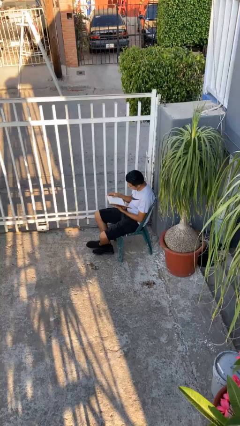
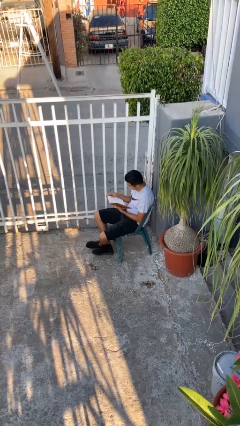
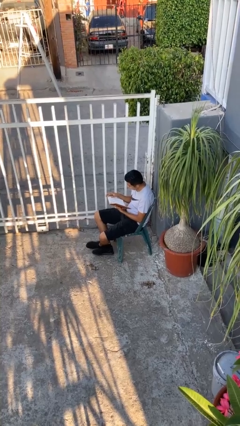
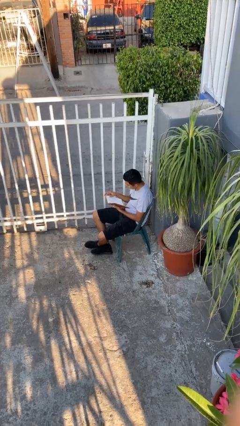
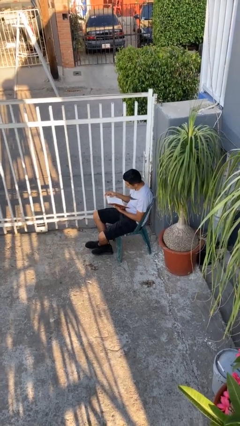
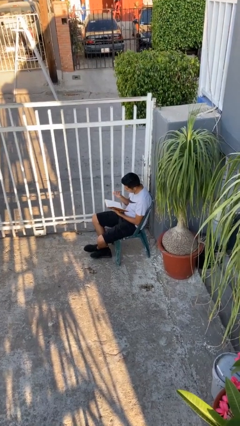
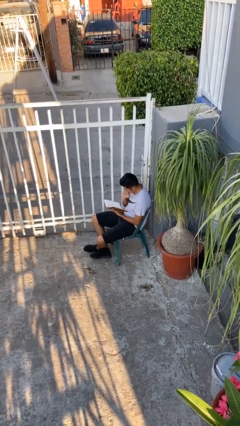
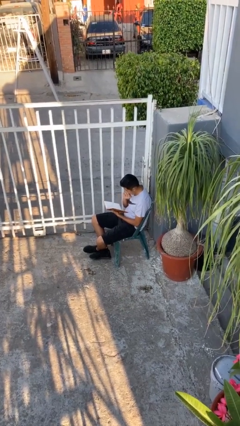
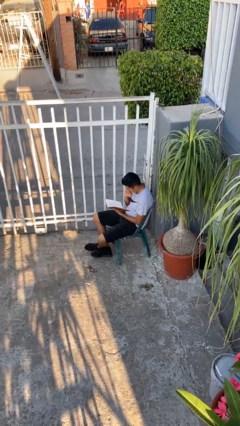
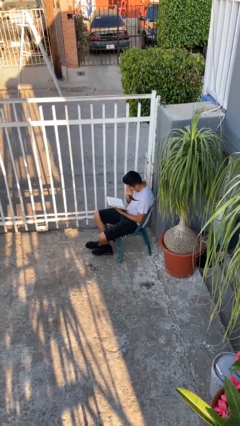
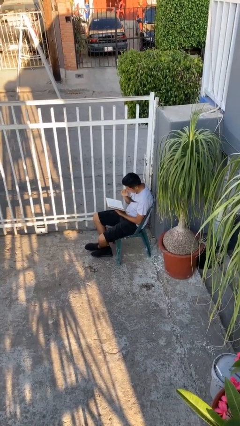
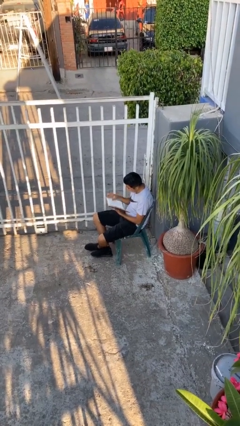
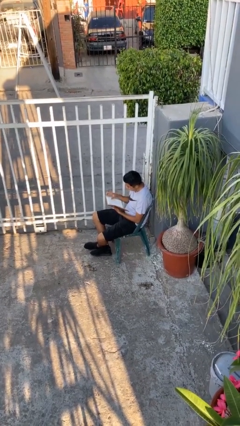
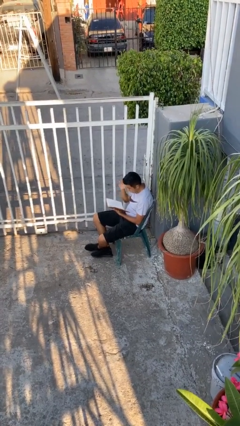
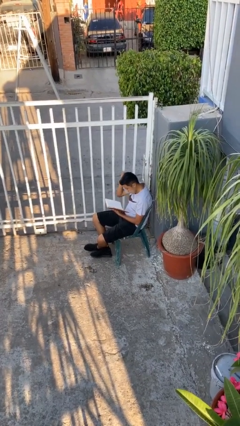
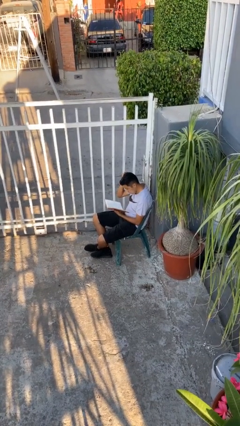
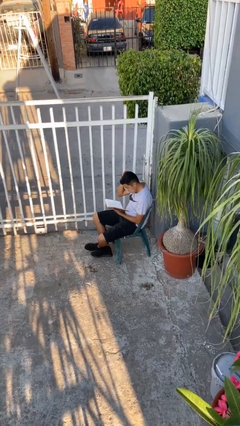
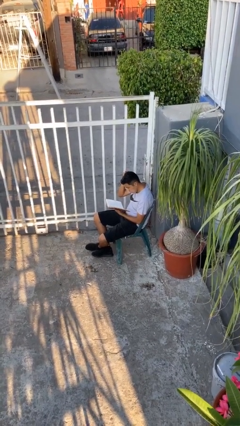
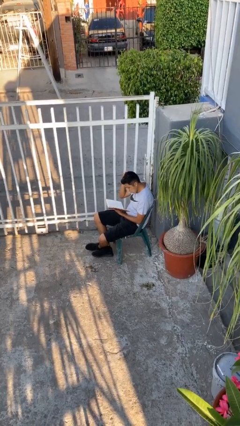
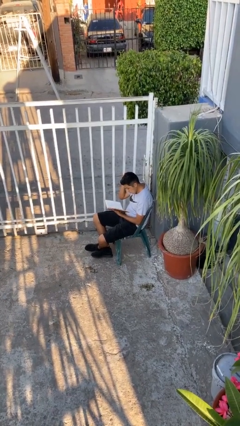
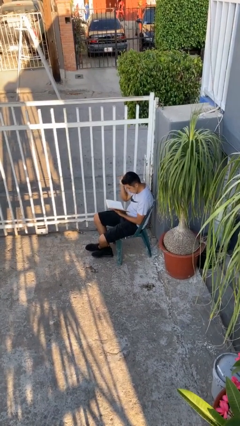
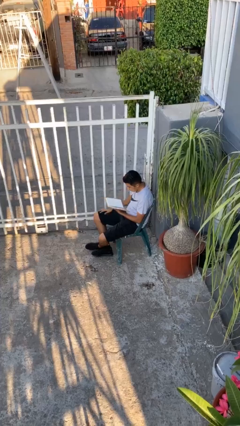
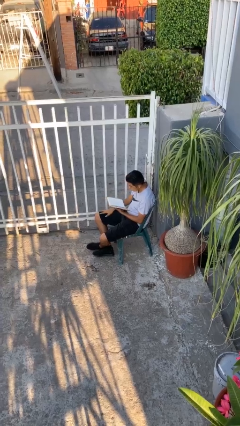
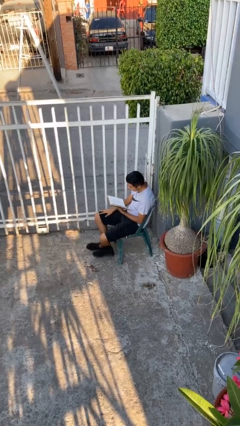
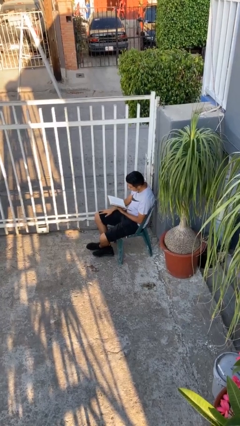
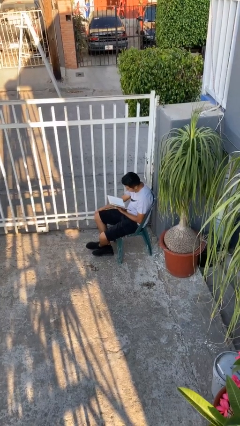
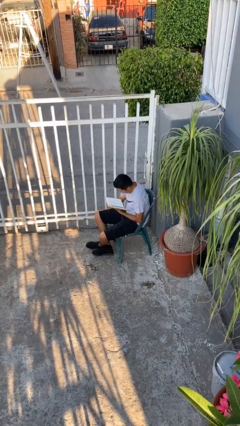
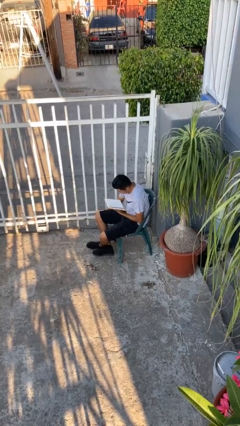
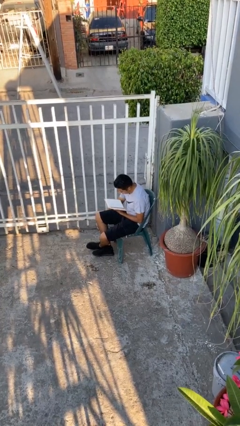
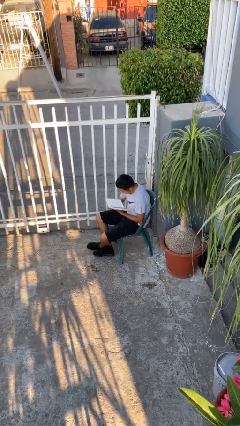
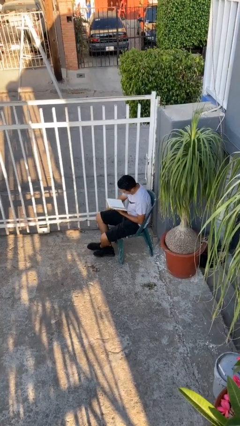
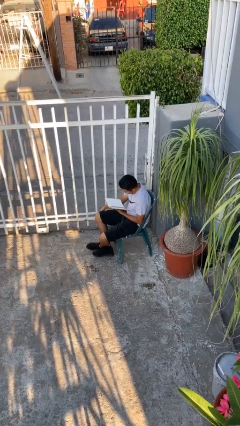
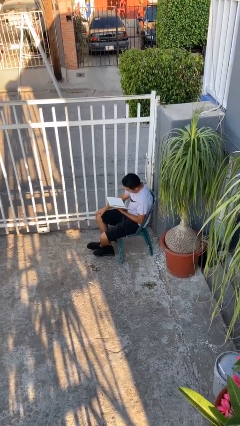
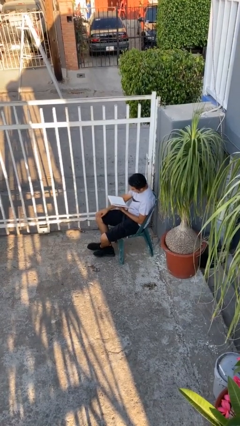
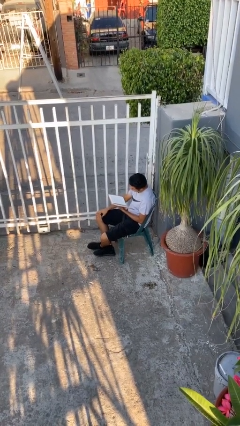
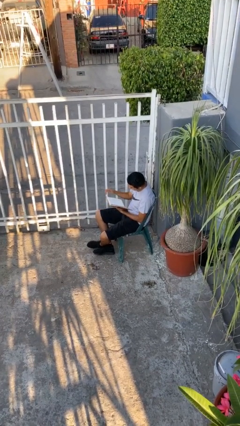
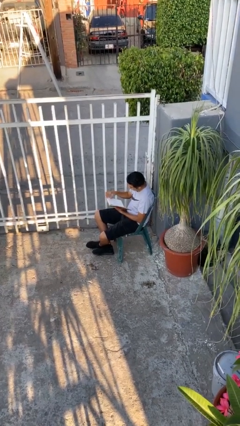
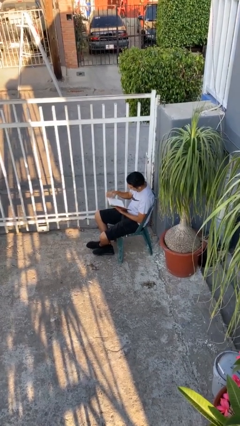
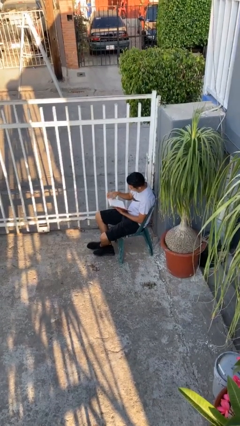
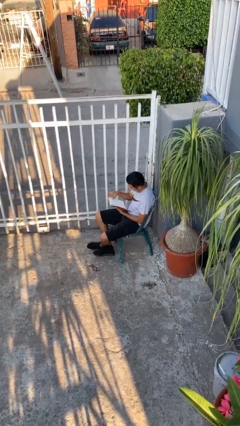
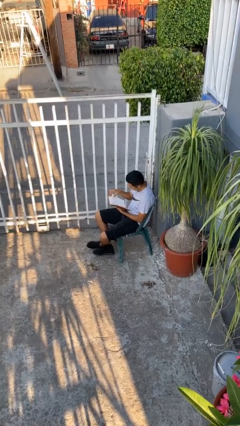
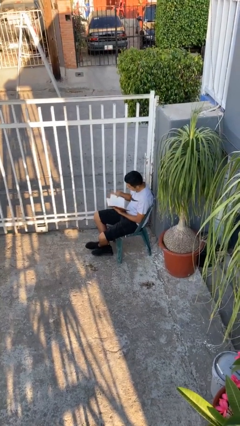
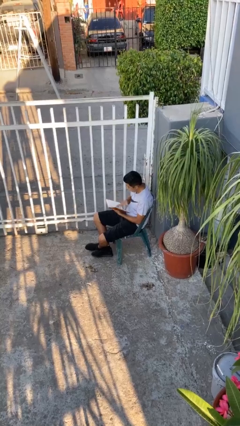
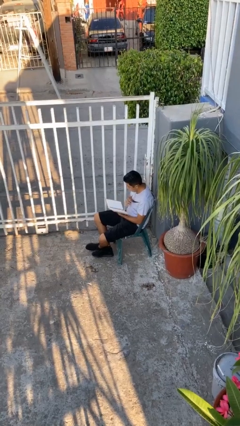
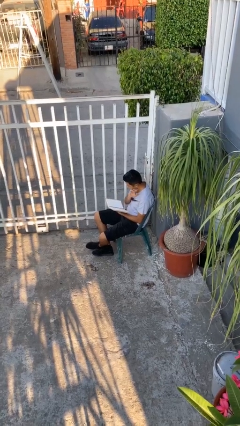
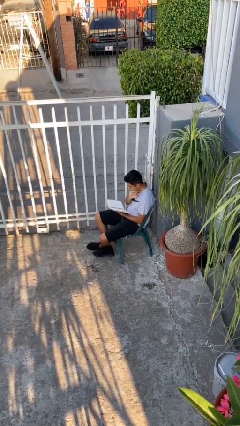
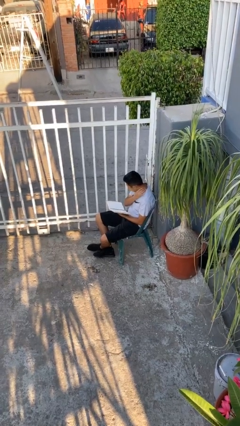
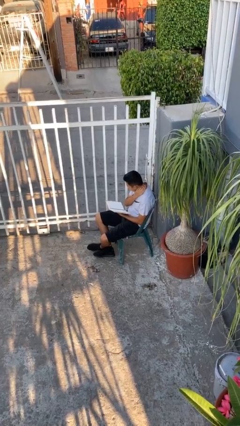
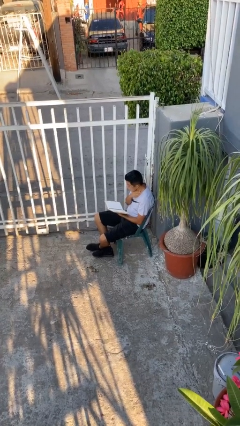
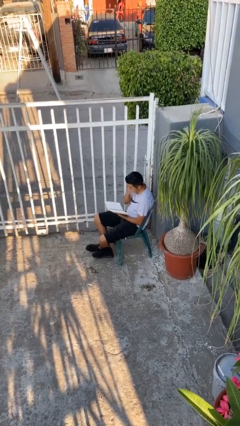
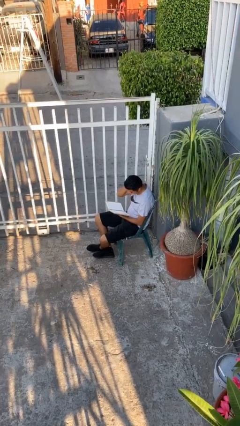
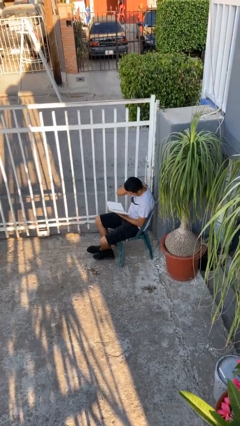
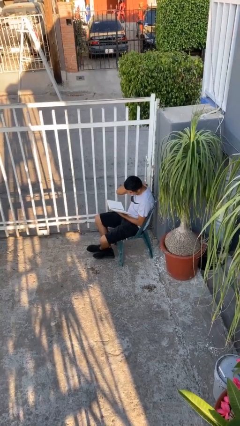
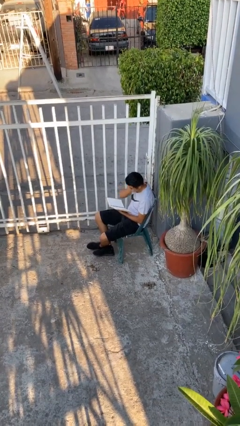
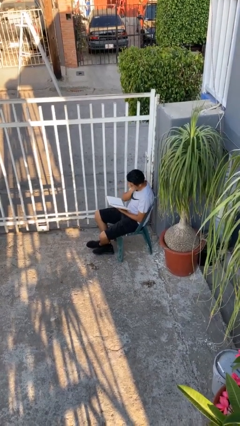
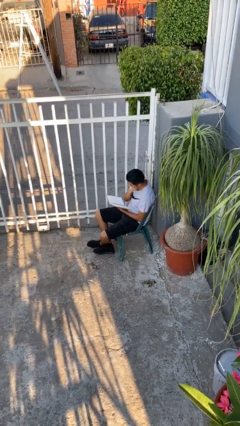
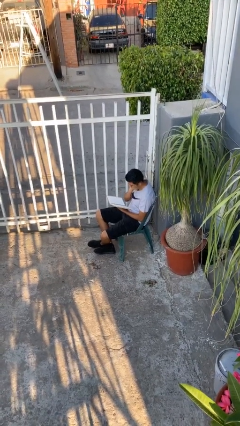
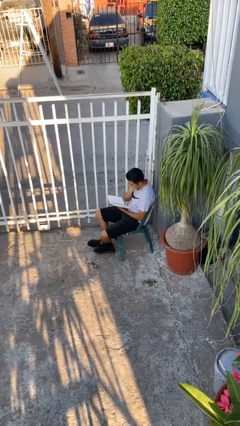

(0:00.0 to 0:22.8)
person reads document

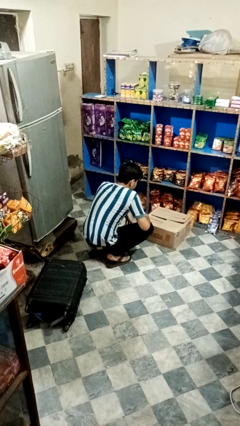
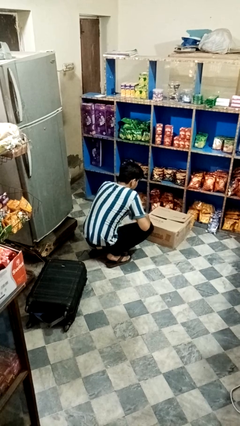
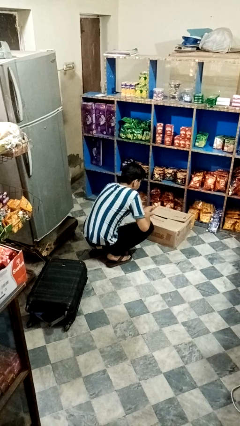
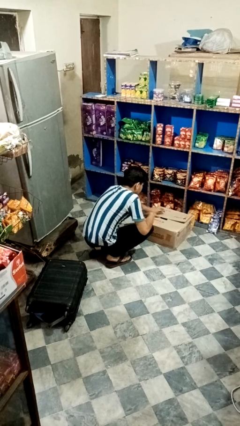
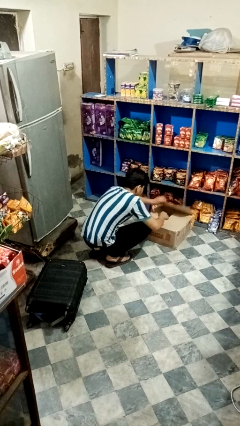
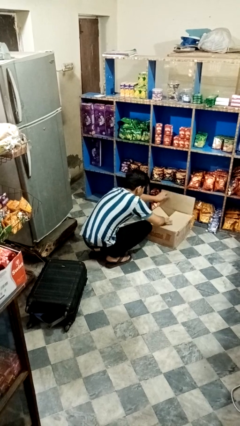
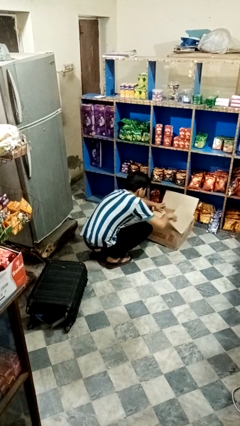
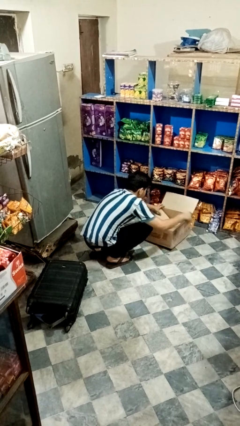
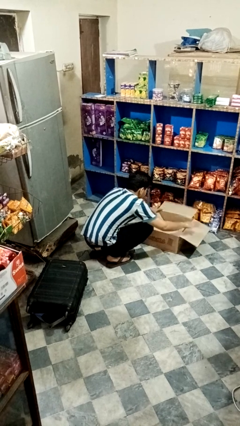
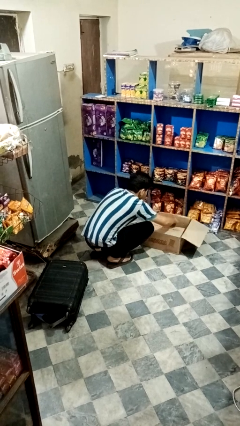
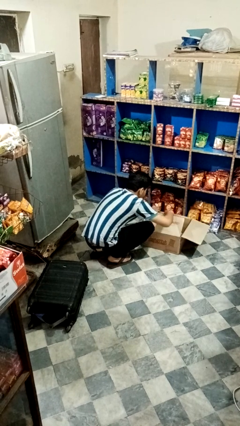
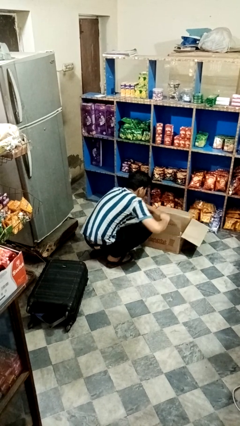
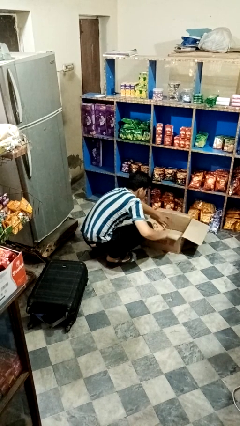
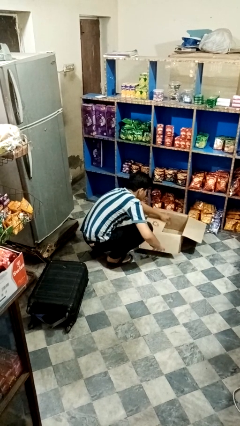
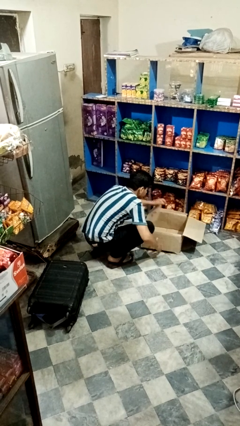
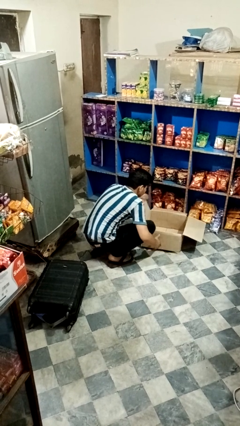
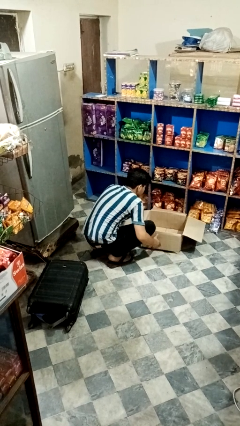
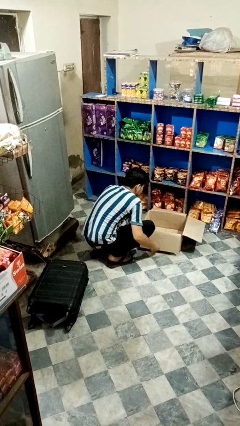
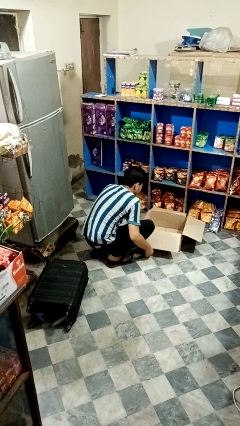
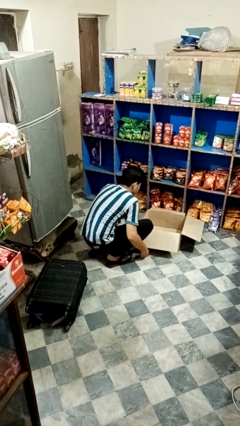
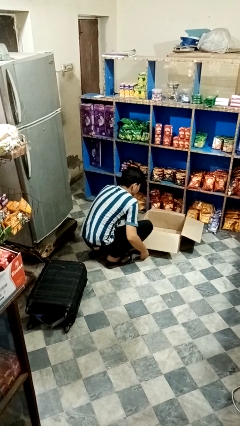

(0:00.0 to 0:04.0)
person opens box

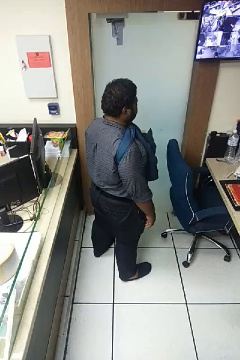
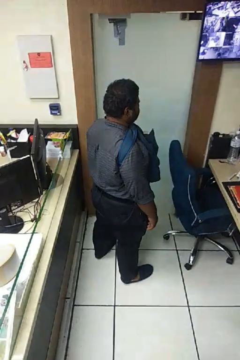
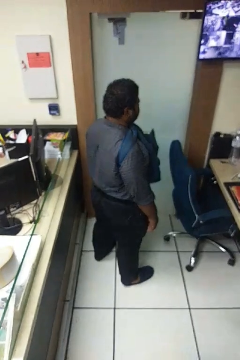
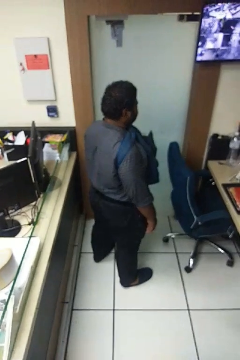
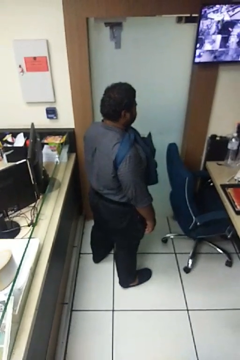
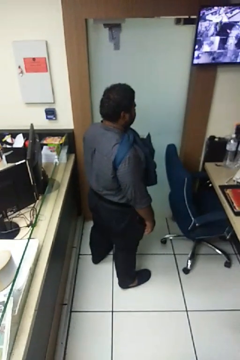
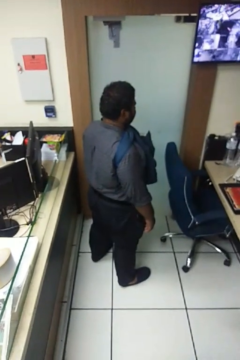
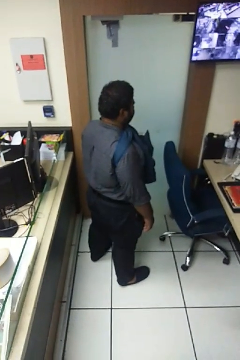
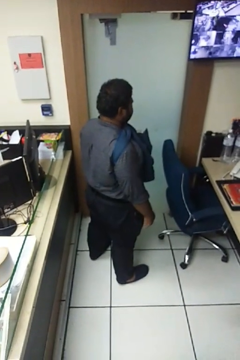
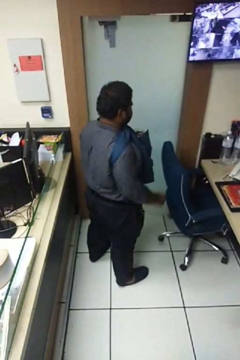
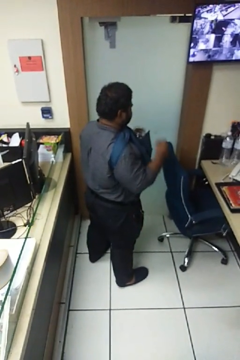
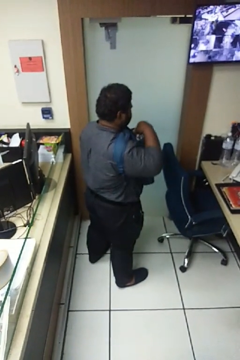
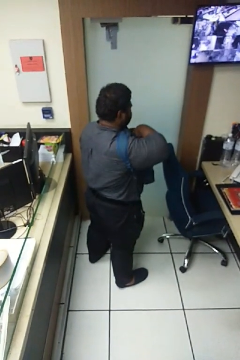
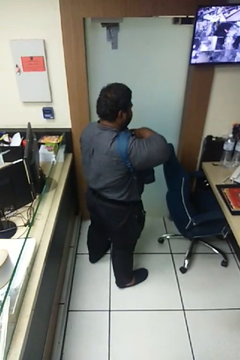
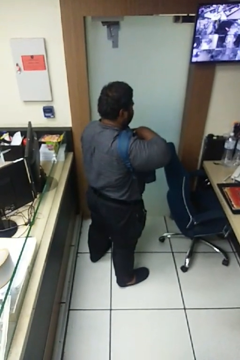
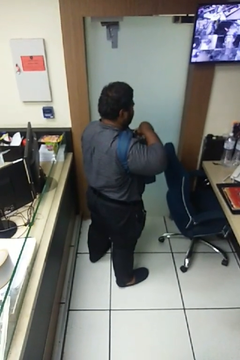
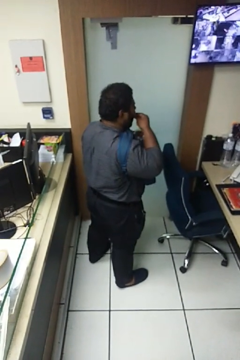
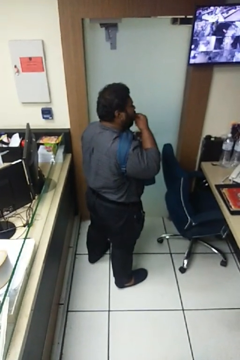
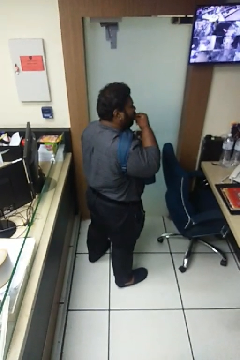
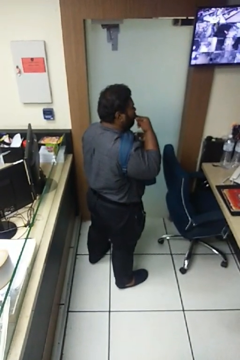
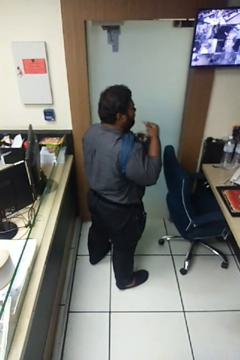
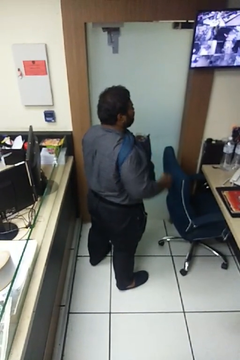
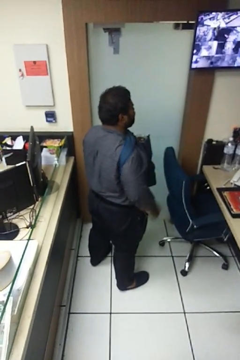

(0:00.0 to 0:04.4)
person eats snack from bag
